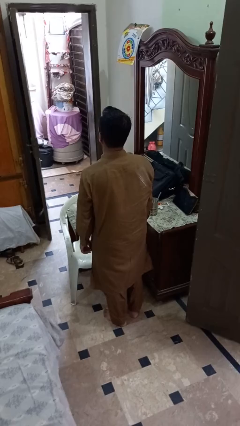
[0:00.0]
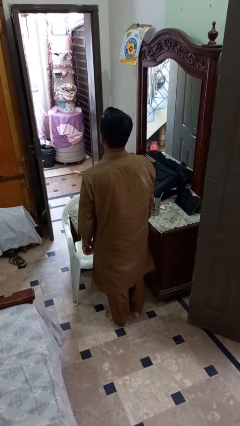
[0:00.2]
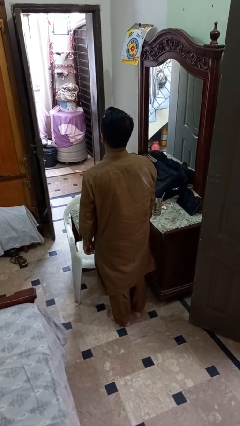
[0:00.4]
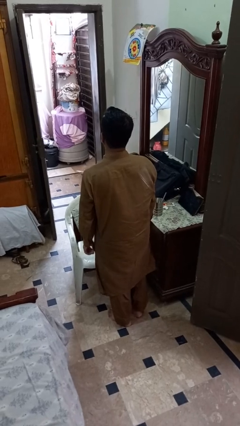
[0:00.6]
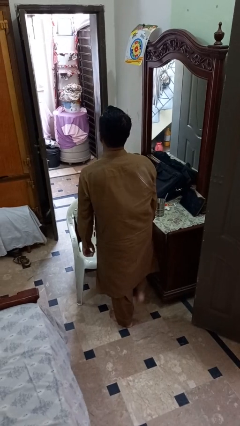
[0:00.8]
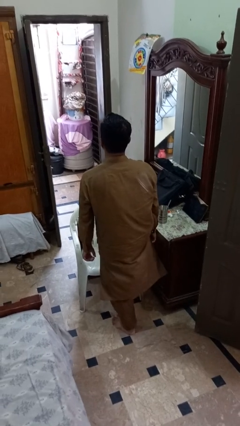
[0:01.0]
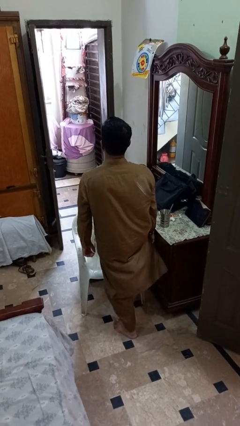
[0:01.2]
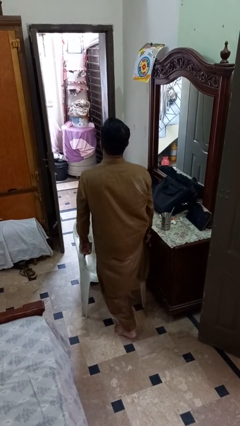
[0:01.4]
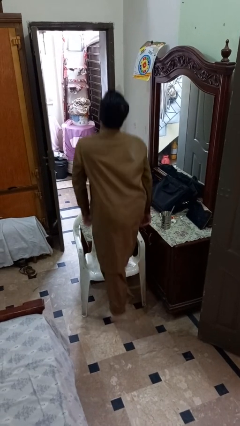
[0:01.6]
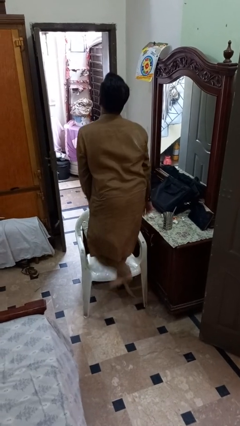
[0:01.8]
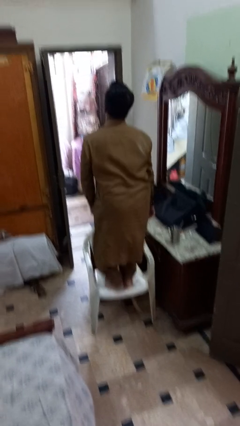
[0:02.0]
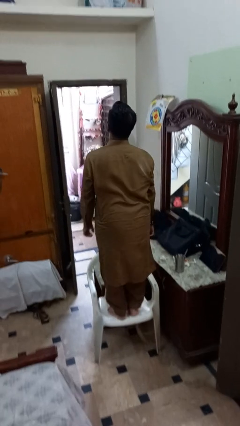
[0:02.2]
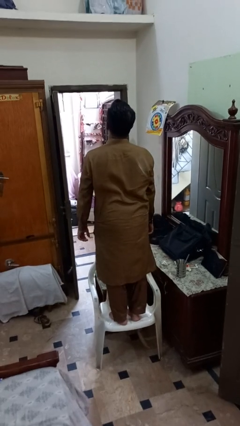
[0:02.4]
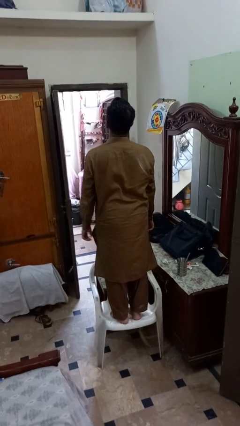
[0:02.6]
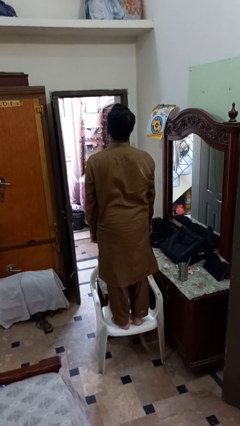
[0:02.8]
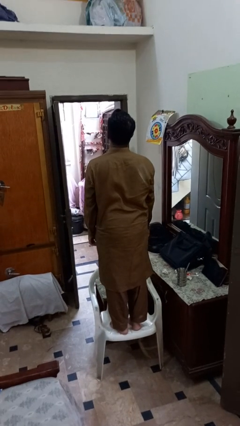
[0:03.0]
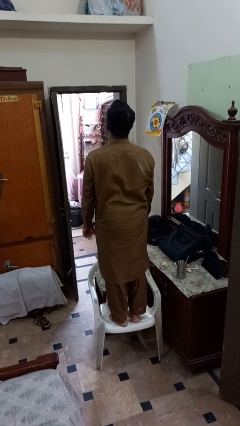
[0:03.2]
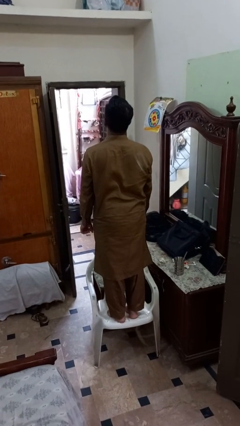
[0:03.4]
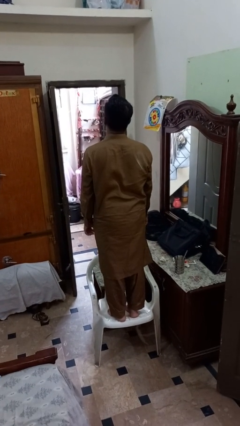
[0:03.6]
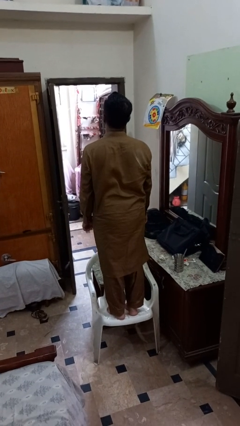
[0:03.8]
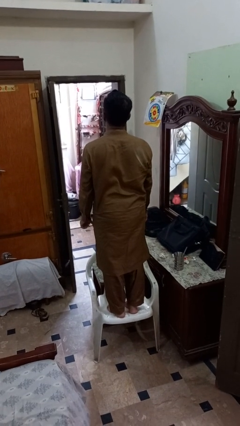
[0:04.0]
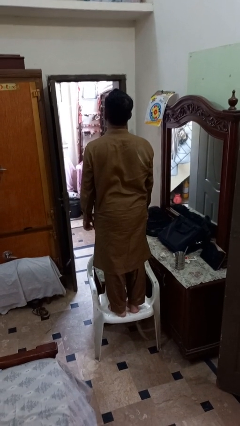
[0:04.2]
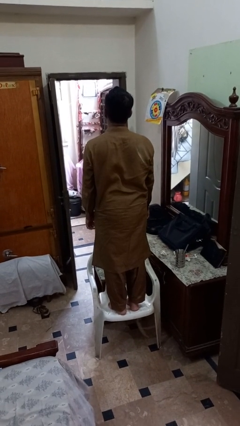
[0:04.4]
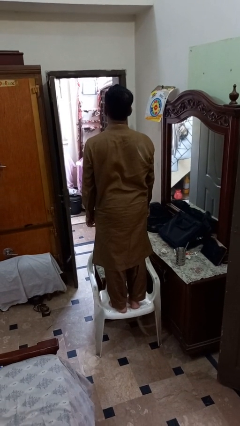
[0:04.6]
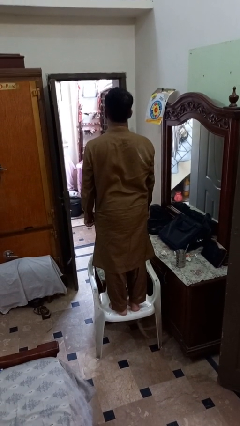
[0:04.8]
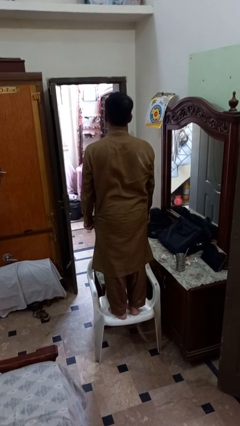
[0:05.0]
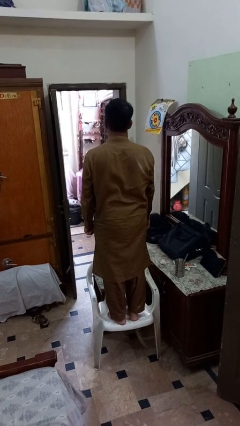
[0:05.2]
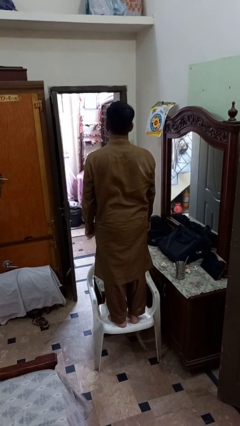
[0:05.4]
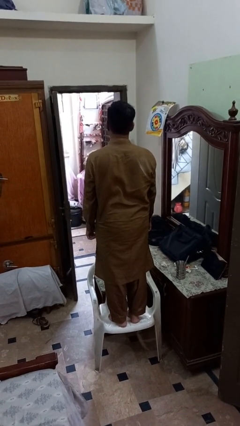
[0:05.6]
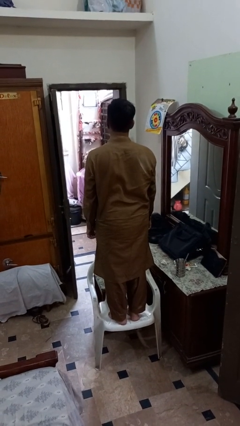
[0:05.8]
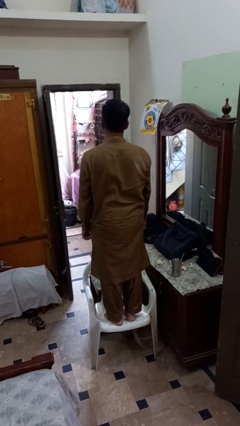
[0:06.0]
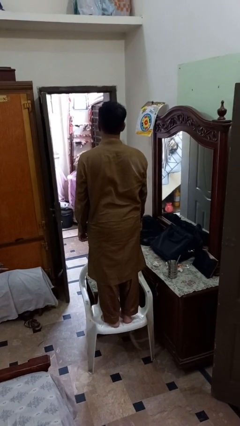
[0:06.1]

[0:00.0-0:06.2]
person climbs on chair

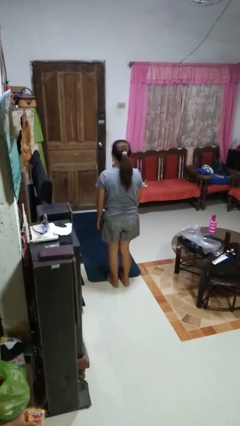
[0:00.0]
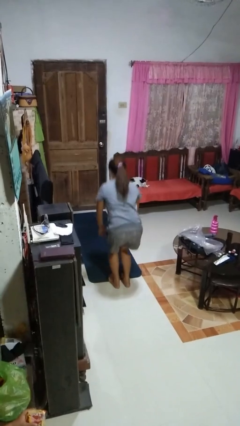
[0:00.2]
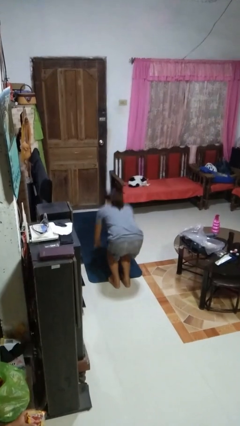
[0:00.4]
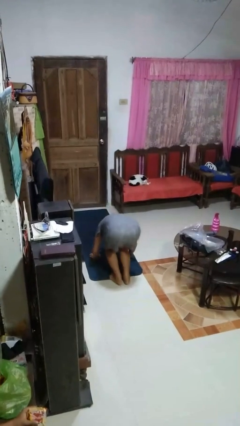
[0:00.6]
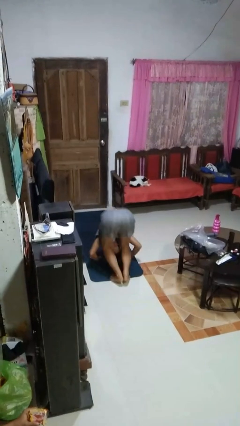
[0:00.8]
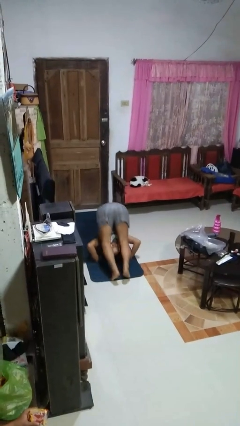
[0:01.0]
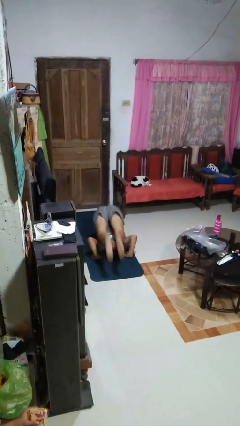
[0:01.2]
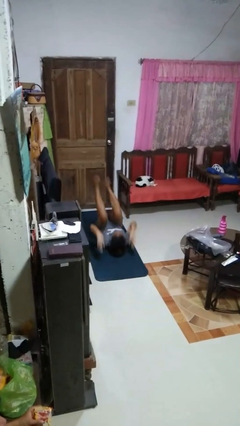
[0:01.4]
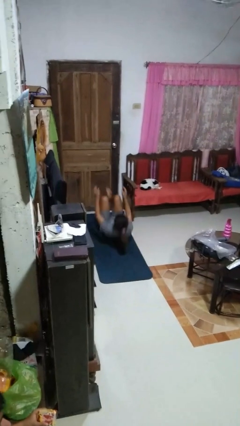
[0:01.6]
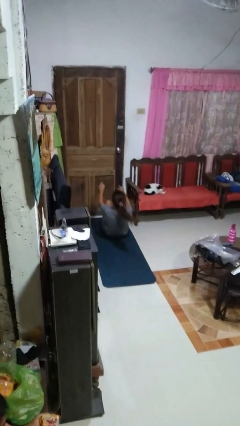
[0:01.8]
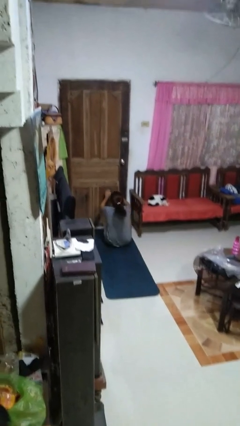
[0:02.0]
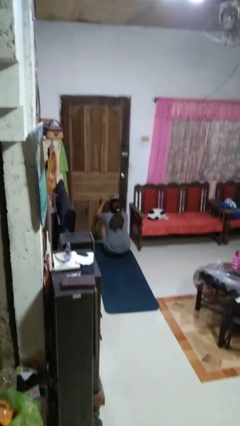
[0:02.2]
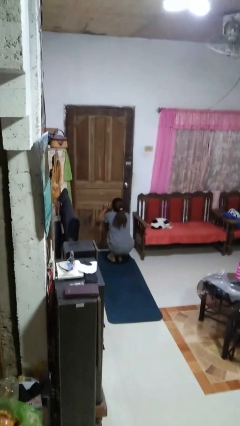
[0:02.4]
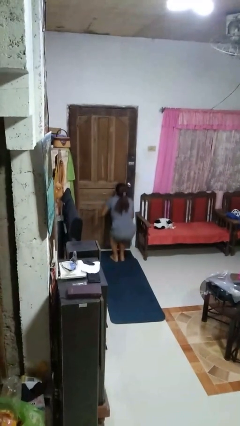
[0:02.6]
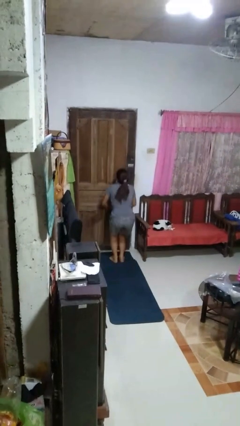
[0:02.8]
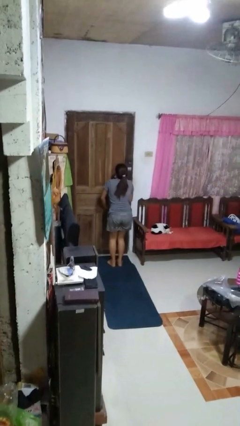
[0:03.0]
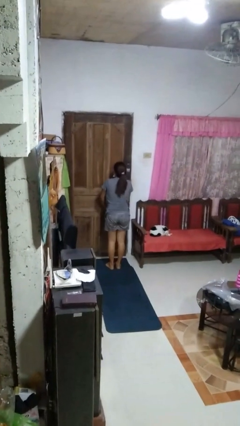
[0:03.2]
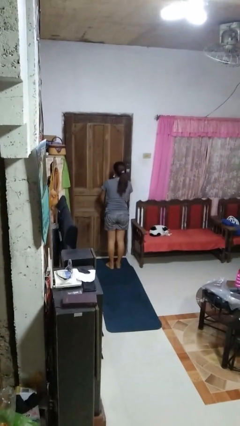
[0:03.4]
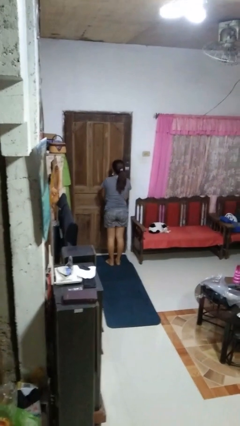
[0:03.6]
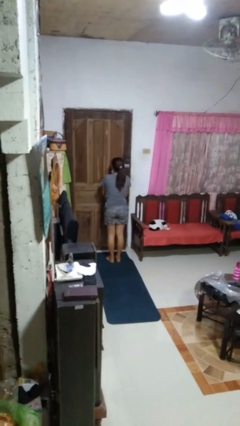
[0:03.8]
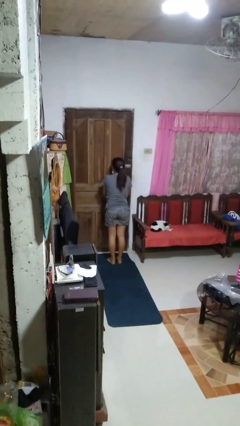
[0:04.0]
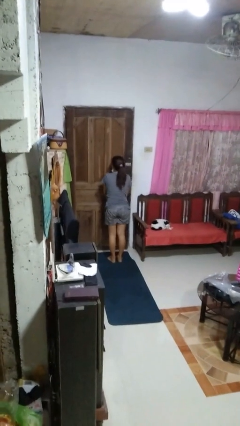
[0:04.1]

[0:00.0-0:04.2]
person somersaults

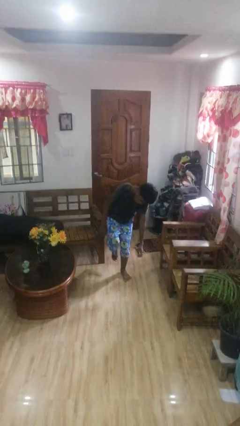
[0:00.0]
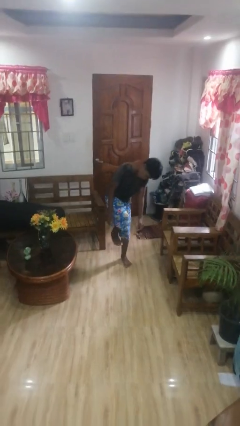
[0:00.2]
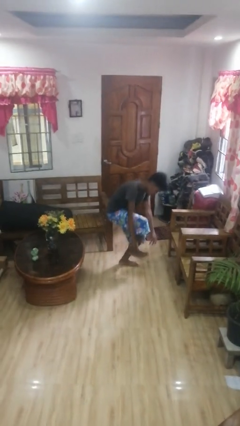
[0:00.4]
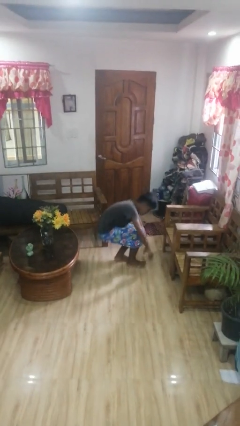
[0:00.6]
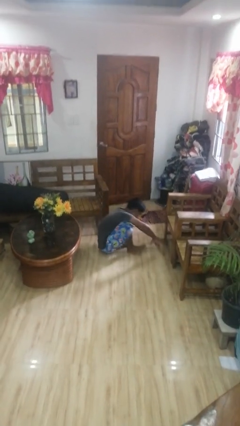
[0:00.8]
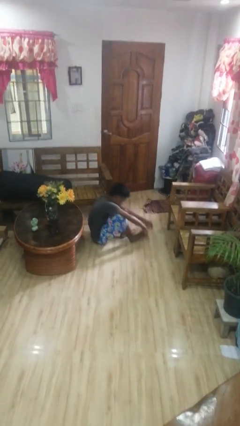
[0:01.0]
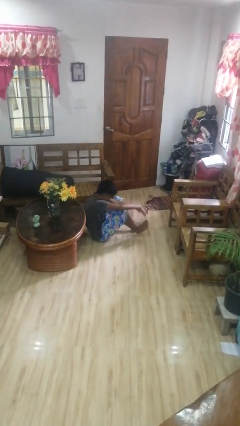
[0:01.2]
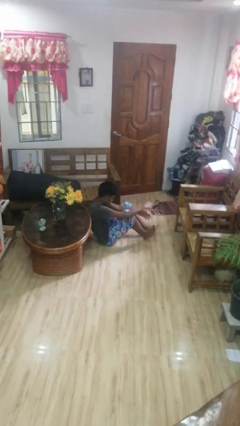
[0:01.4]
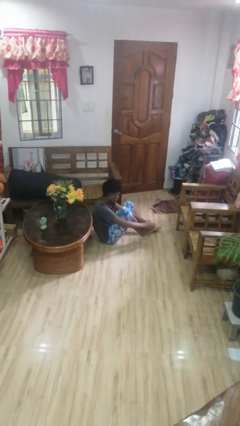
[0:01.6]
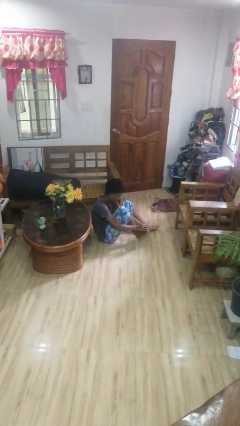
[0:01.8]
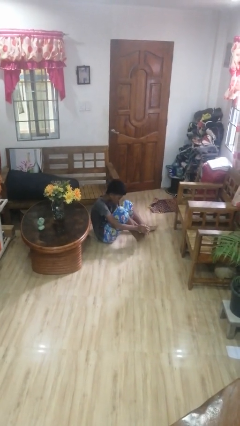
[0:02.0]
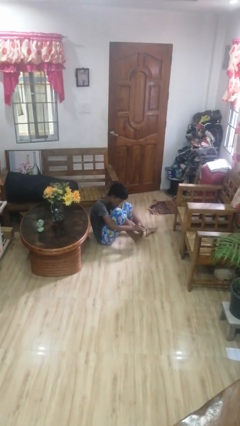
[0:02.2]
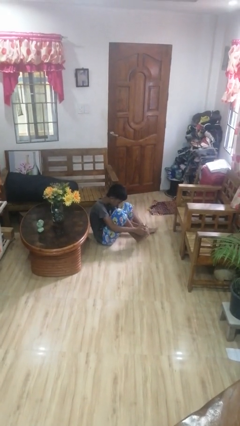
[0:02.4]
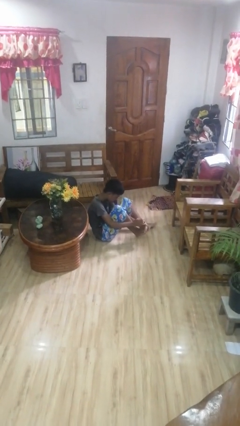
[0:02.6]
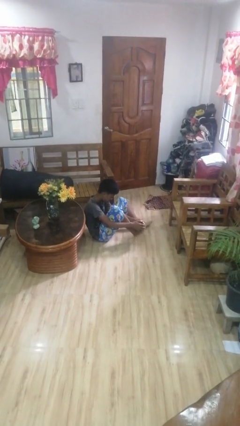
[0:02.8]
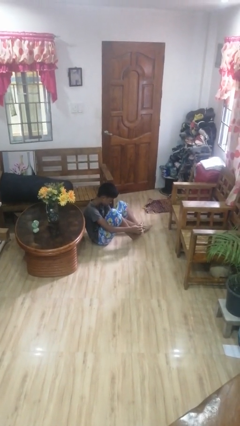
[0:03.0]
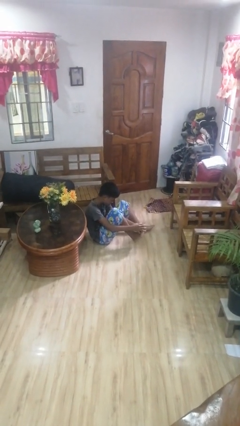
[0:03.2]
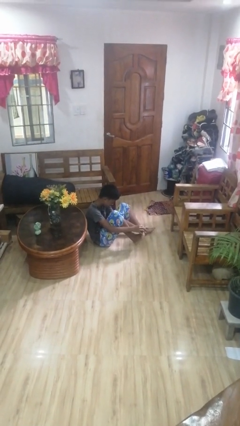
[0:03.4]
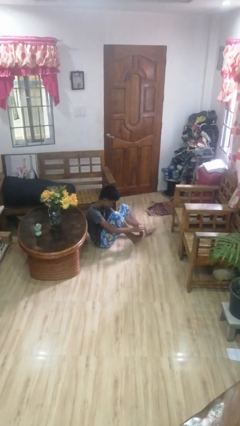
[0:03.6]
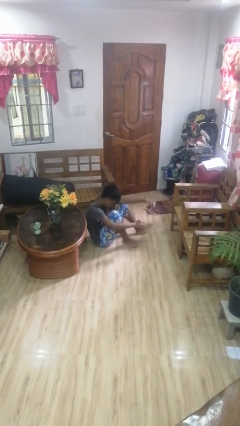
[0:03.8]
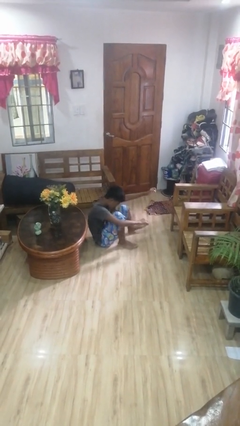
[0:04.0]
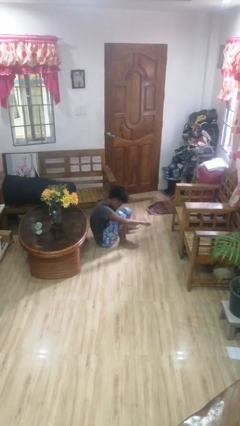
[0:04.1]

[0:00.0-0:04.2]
person lies down on floor

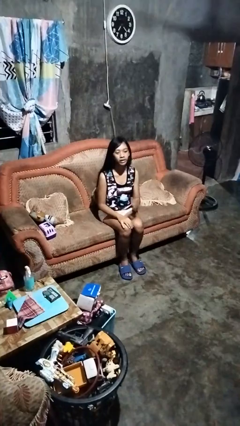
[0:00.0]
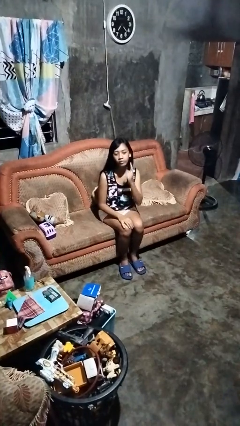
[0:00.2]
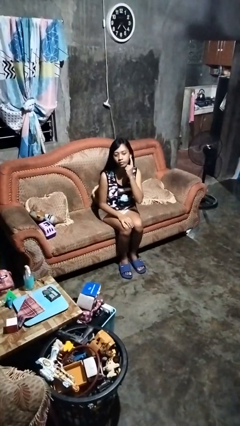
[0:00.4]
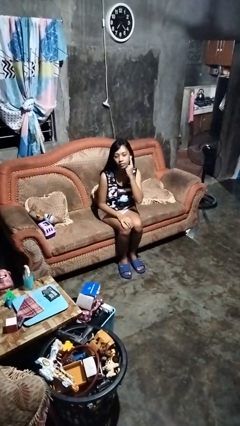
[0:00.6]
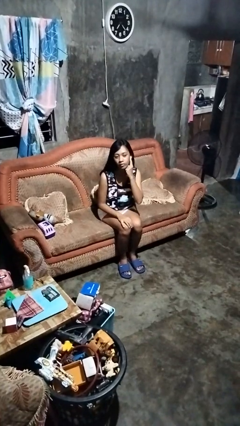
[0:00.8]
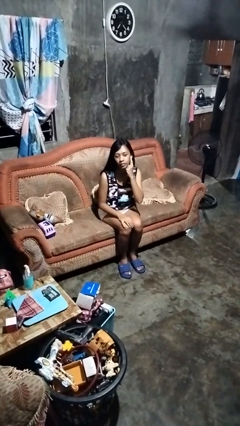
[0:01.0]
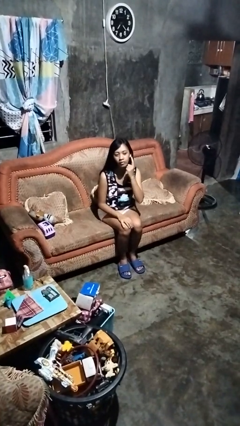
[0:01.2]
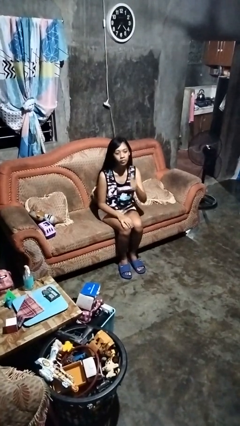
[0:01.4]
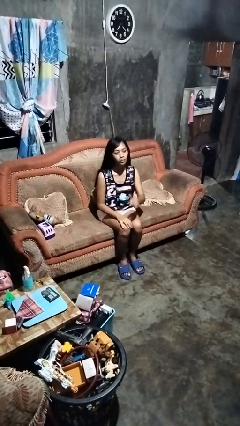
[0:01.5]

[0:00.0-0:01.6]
person gestures listen closely

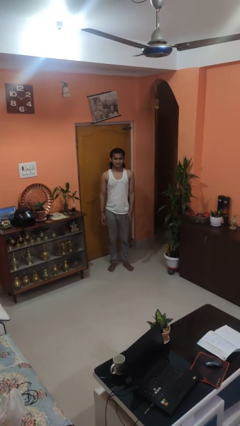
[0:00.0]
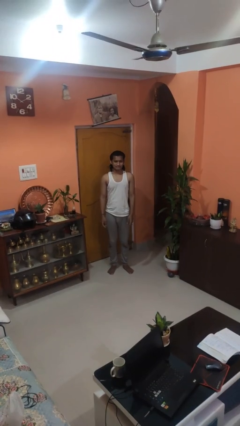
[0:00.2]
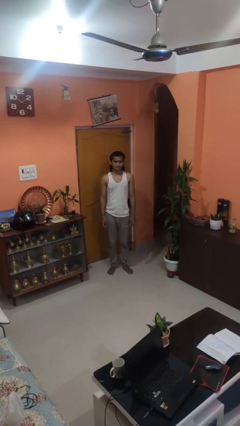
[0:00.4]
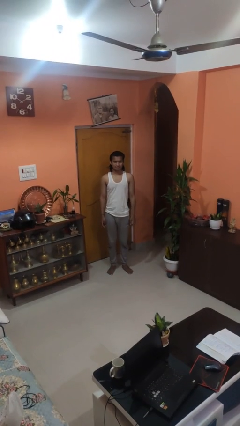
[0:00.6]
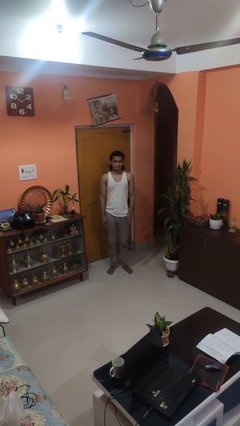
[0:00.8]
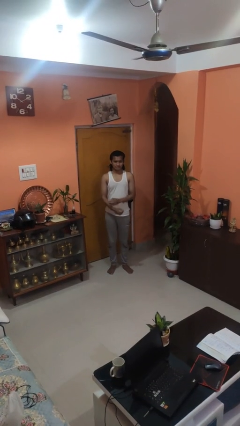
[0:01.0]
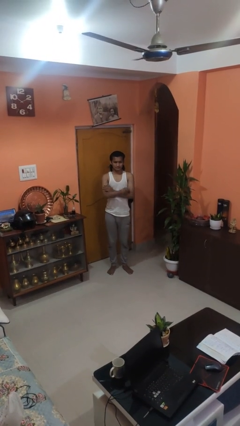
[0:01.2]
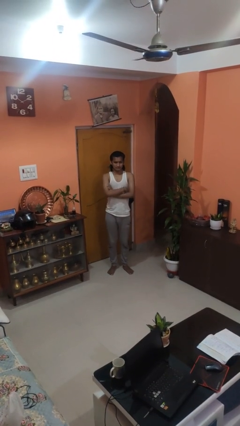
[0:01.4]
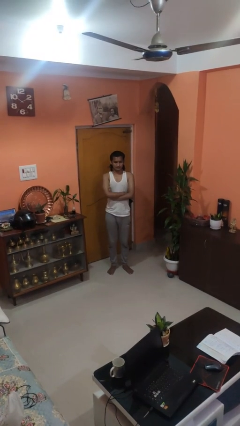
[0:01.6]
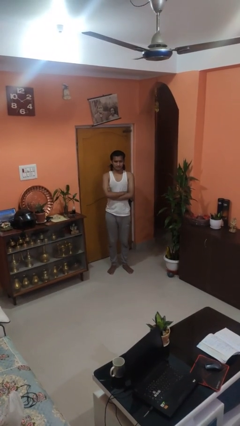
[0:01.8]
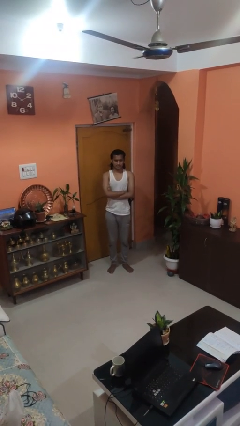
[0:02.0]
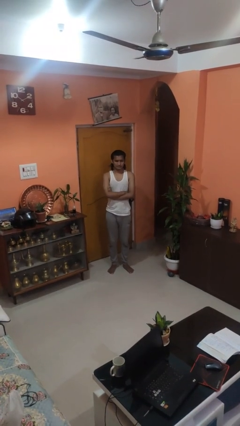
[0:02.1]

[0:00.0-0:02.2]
person crosses arms
